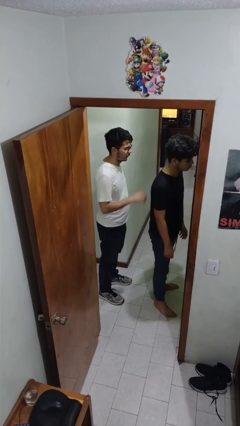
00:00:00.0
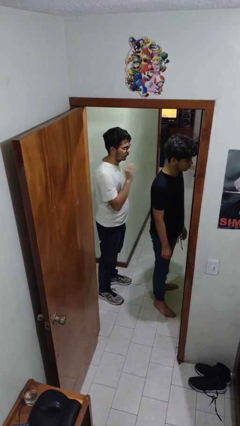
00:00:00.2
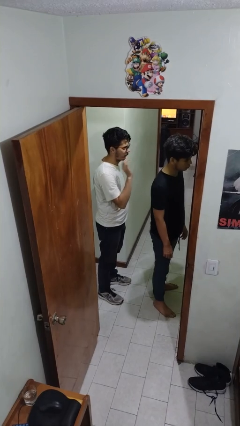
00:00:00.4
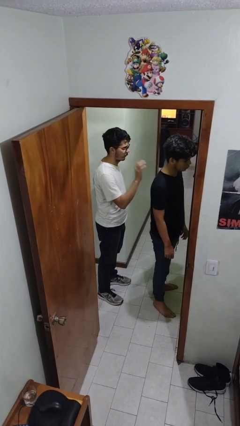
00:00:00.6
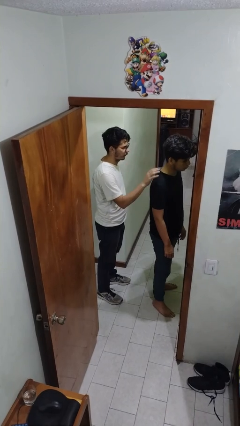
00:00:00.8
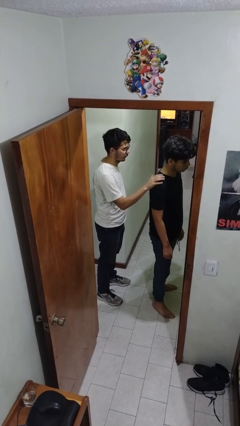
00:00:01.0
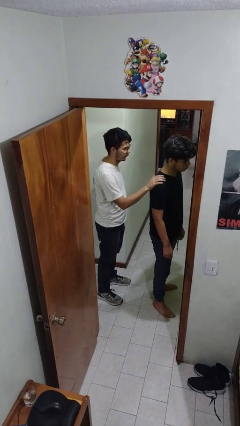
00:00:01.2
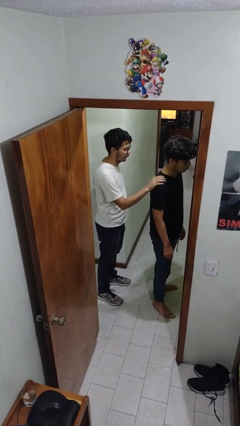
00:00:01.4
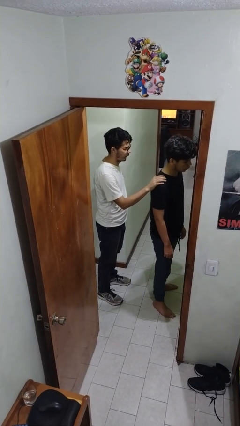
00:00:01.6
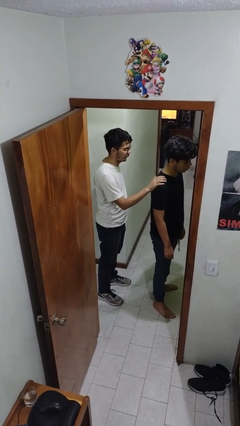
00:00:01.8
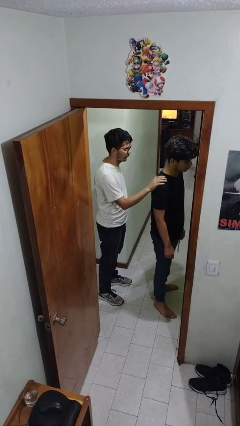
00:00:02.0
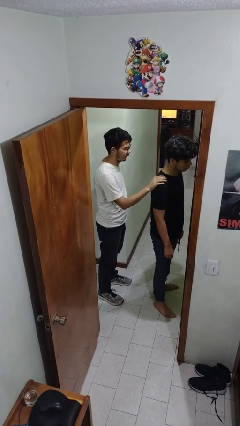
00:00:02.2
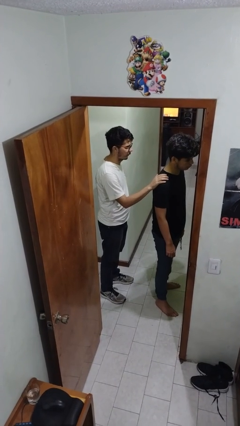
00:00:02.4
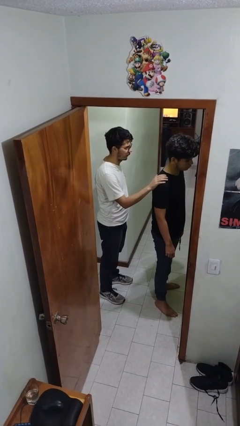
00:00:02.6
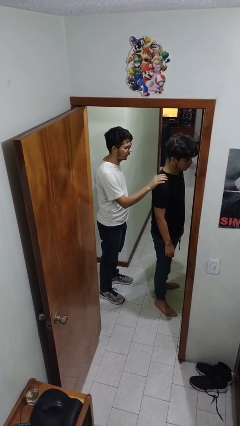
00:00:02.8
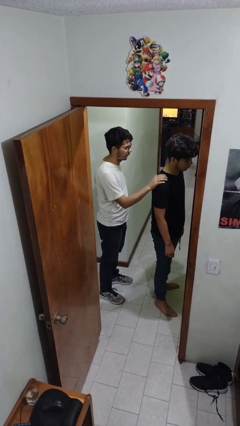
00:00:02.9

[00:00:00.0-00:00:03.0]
person grabs person by shoulder

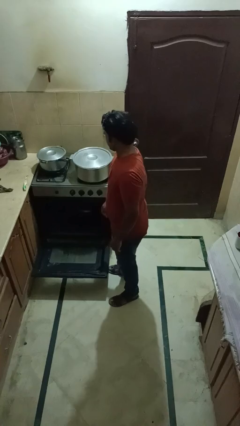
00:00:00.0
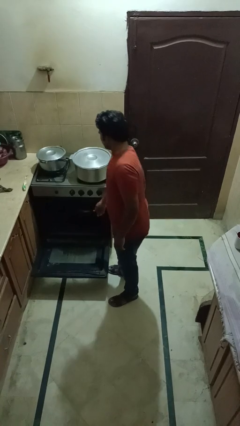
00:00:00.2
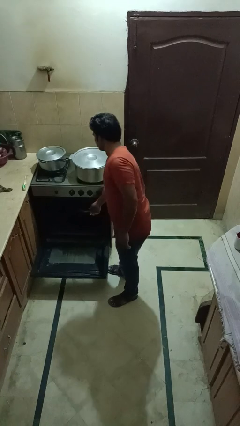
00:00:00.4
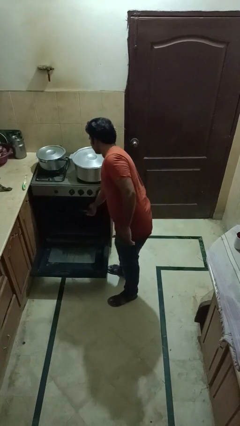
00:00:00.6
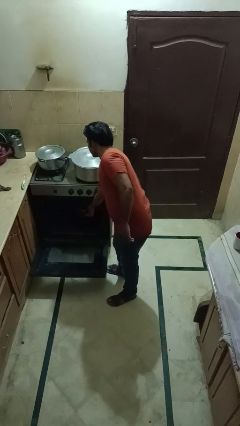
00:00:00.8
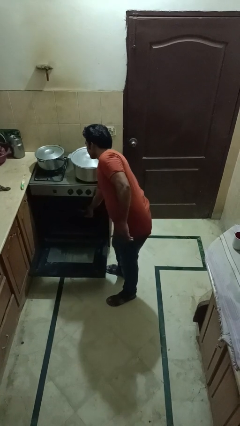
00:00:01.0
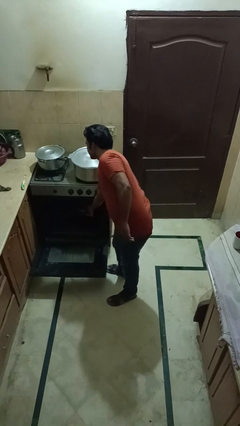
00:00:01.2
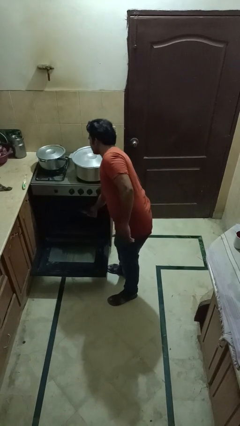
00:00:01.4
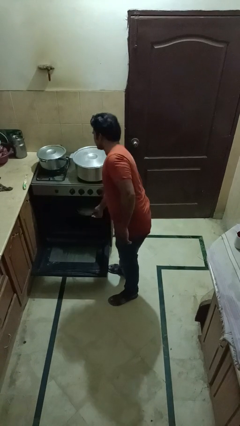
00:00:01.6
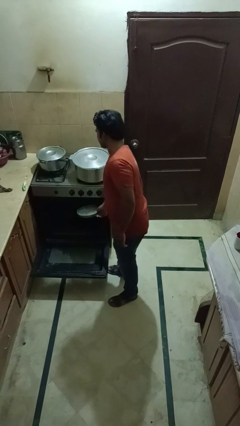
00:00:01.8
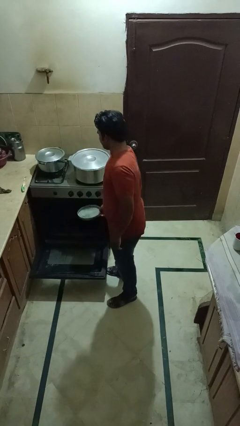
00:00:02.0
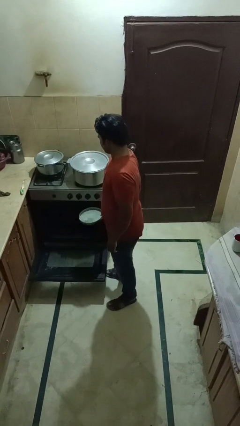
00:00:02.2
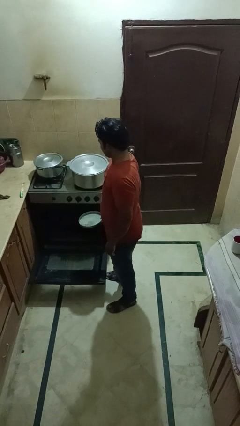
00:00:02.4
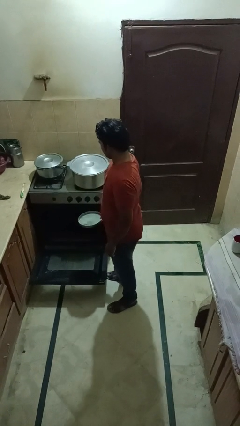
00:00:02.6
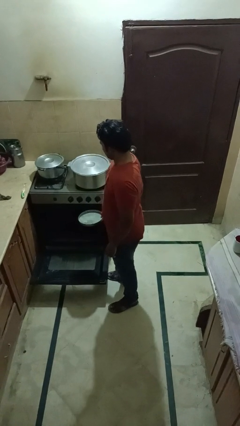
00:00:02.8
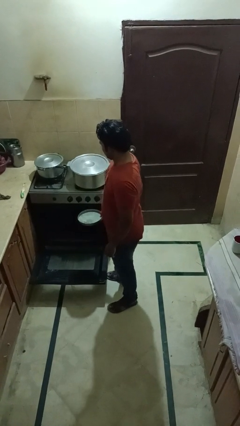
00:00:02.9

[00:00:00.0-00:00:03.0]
person takes object from oven

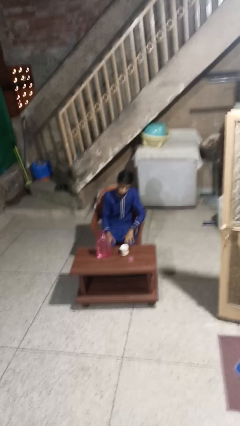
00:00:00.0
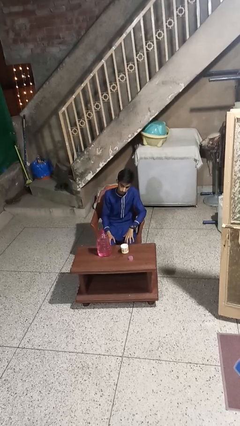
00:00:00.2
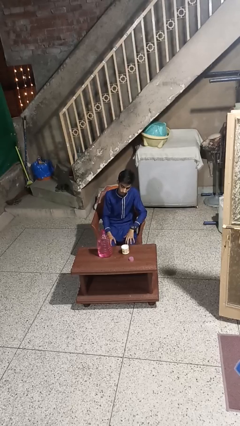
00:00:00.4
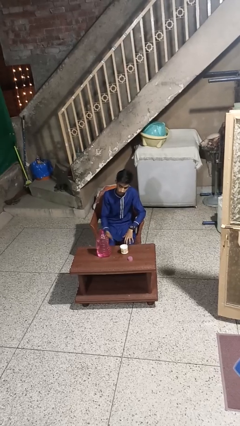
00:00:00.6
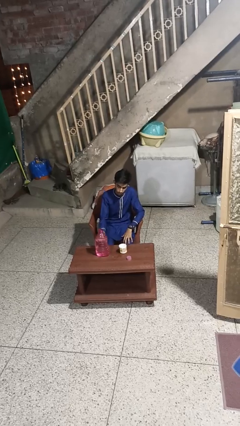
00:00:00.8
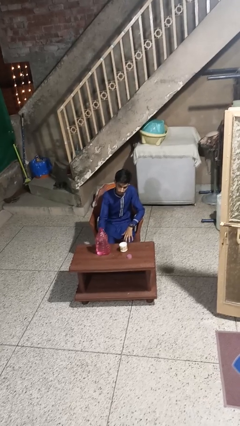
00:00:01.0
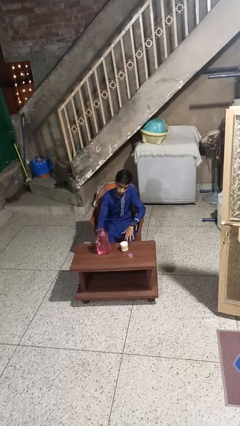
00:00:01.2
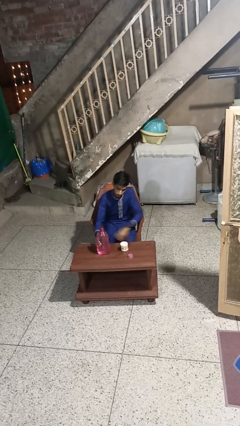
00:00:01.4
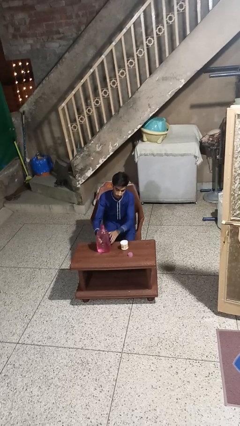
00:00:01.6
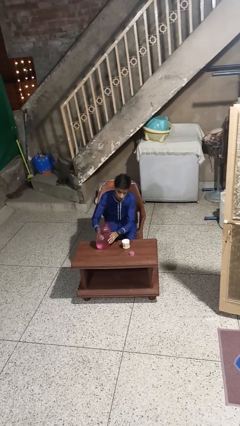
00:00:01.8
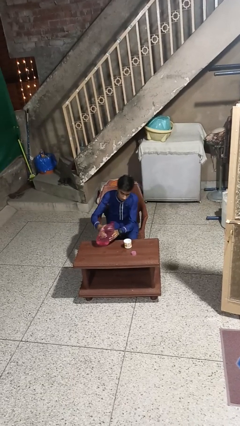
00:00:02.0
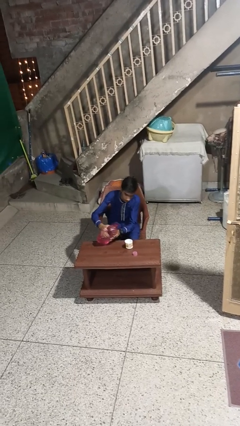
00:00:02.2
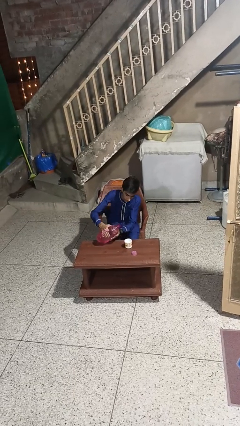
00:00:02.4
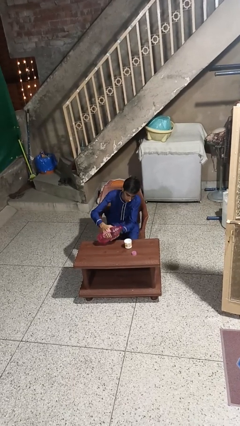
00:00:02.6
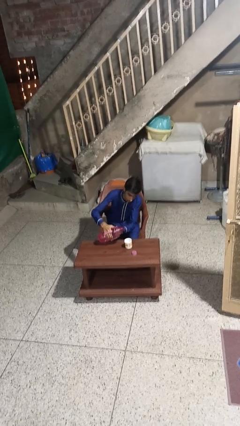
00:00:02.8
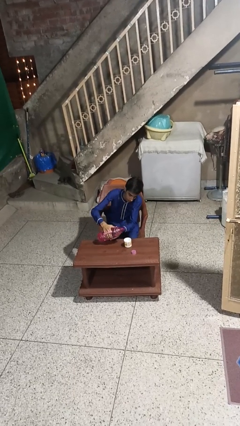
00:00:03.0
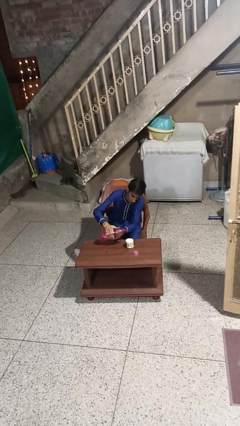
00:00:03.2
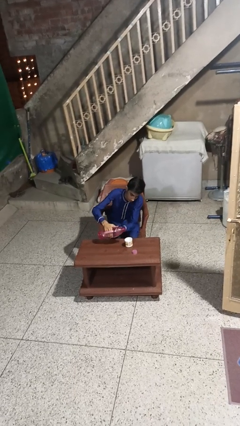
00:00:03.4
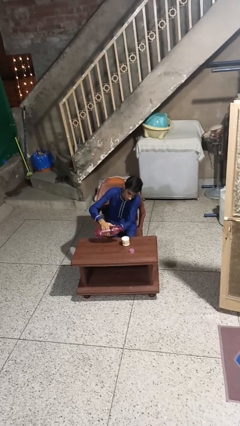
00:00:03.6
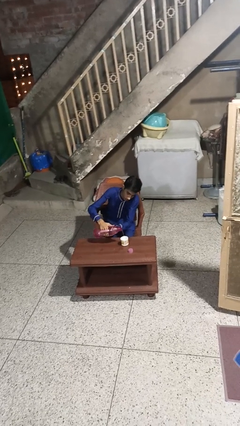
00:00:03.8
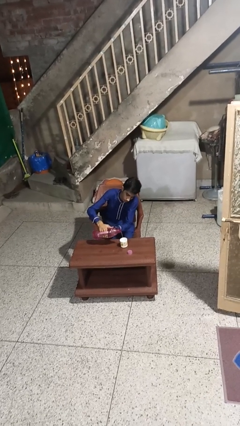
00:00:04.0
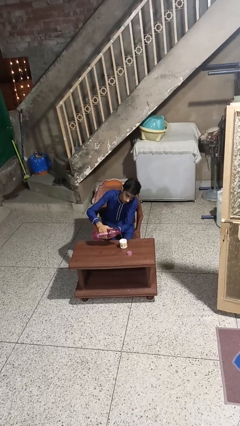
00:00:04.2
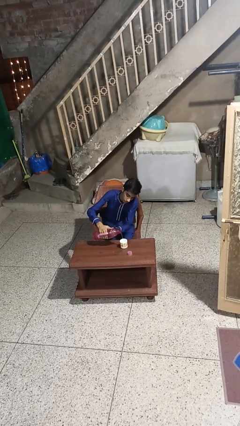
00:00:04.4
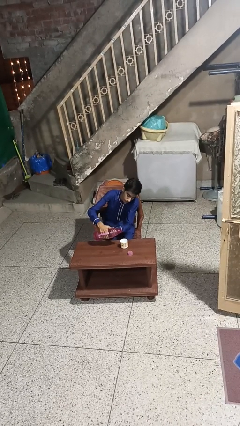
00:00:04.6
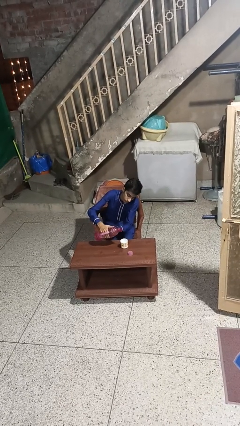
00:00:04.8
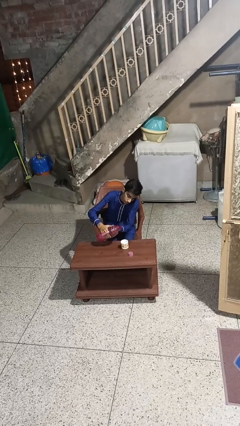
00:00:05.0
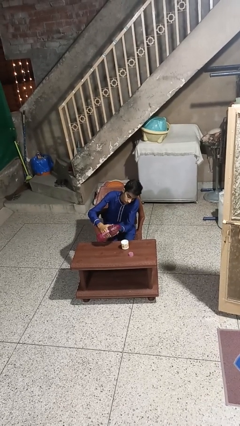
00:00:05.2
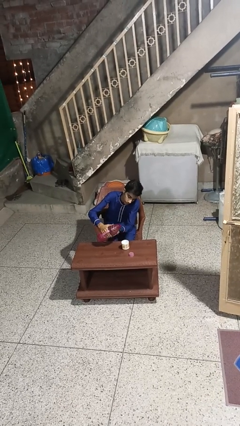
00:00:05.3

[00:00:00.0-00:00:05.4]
person pours liquid into cup

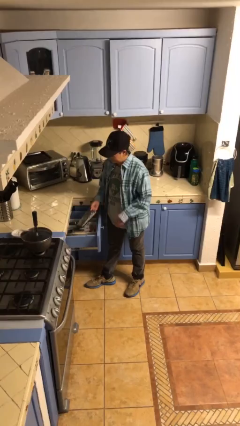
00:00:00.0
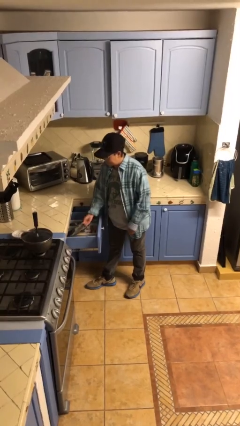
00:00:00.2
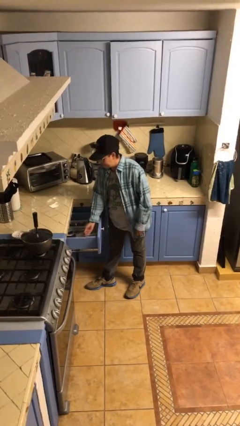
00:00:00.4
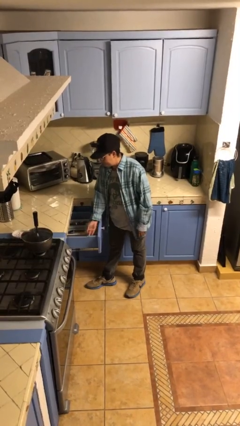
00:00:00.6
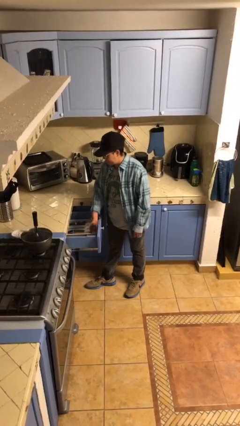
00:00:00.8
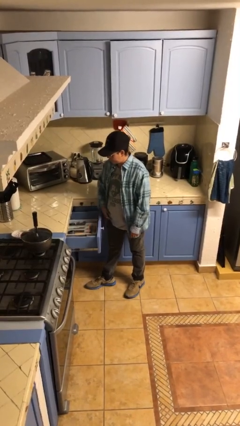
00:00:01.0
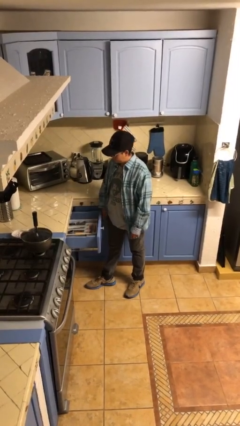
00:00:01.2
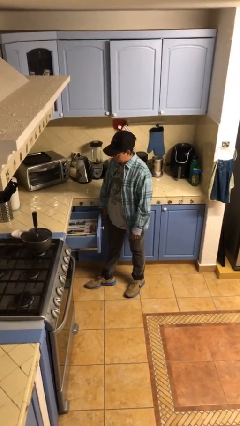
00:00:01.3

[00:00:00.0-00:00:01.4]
person puts object into kitchen drawer

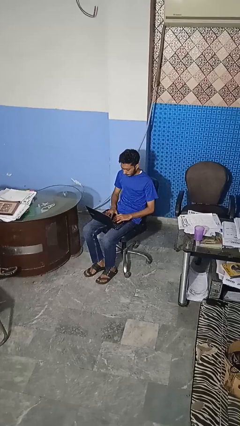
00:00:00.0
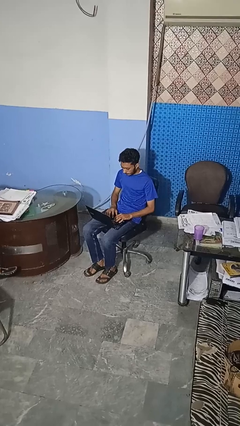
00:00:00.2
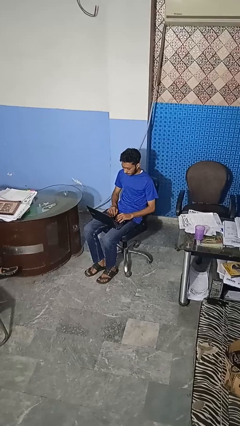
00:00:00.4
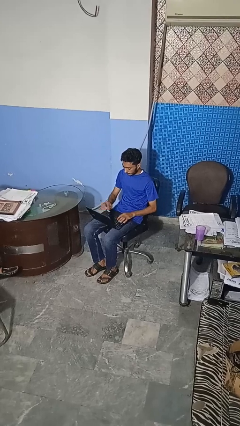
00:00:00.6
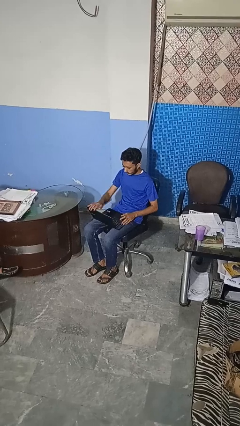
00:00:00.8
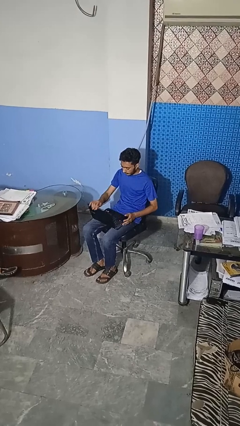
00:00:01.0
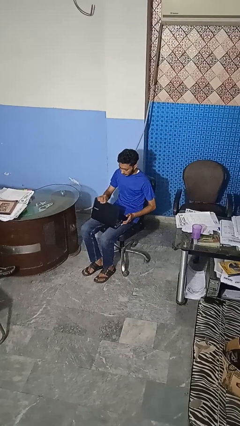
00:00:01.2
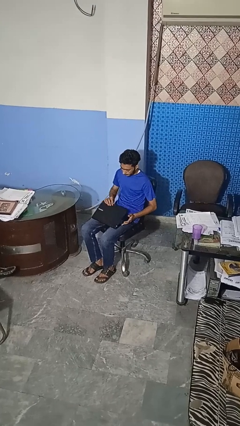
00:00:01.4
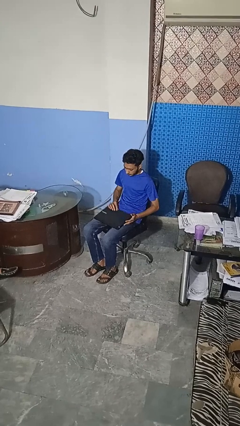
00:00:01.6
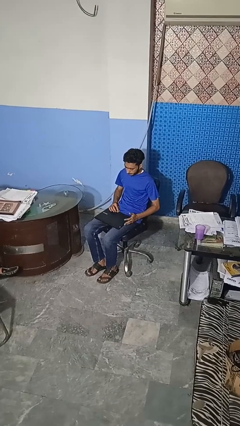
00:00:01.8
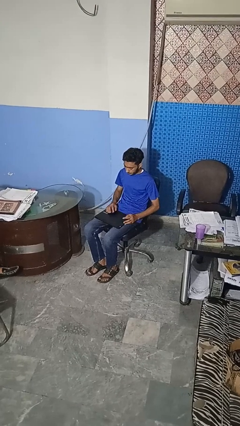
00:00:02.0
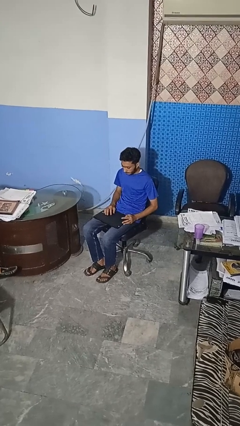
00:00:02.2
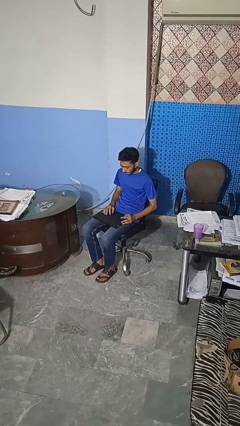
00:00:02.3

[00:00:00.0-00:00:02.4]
person closes laptop

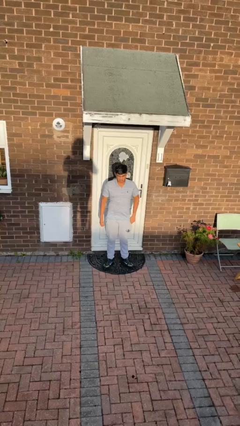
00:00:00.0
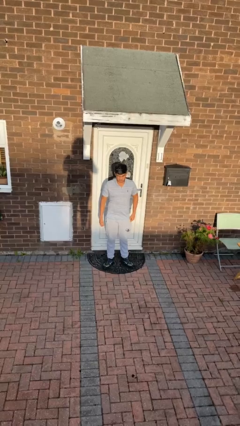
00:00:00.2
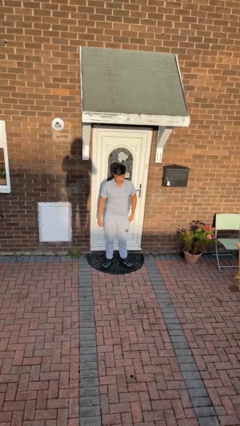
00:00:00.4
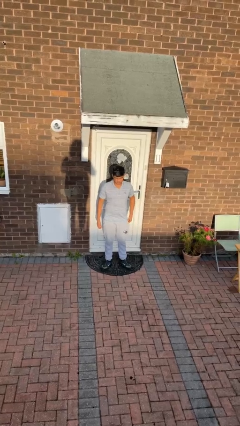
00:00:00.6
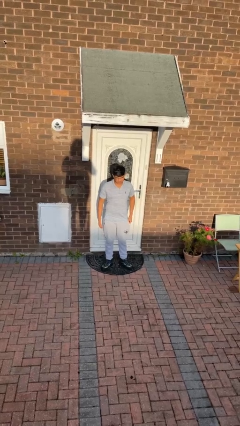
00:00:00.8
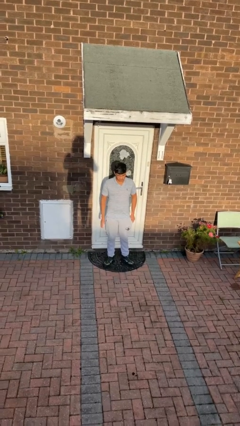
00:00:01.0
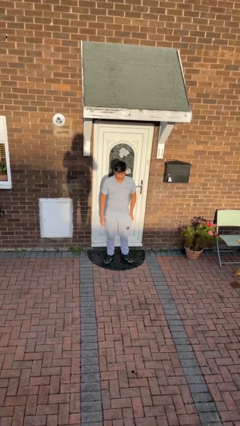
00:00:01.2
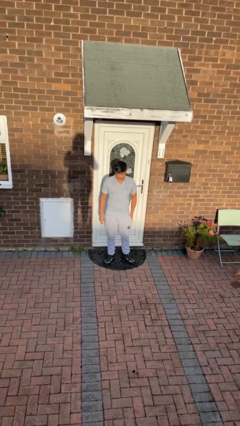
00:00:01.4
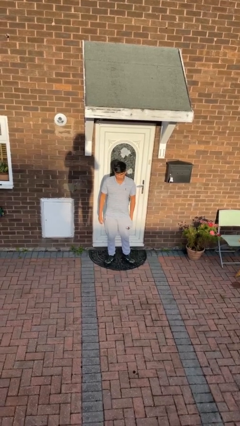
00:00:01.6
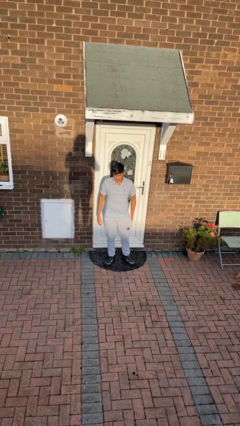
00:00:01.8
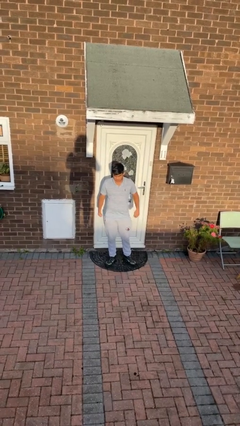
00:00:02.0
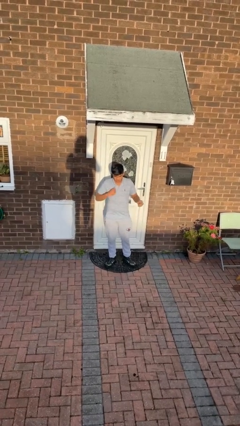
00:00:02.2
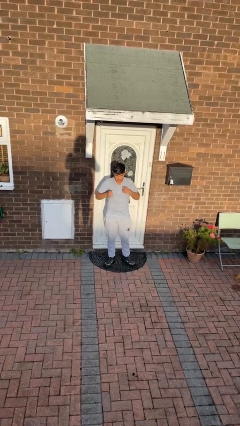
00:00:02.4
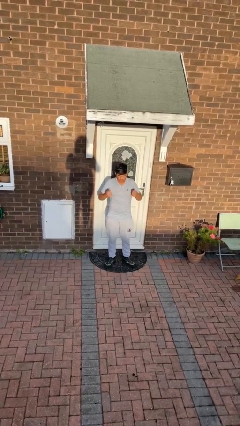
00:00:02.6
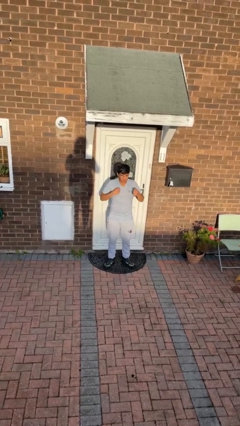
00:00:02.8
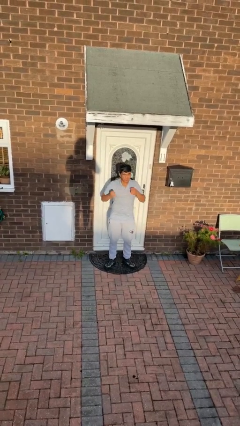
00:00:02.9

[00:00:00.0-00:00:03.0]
person drums on chest
